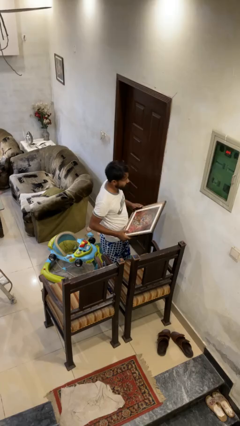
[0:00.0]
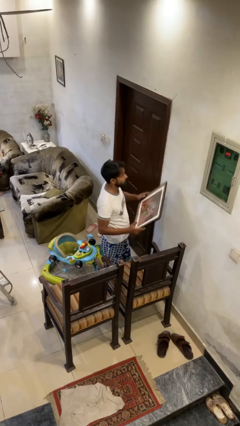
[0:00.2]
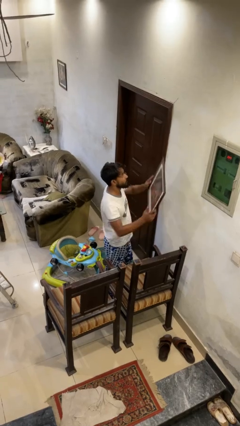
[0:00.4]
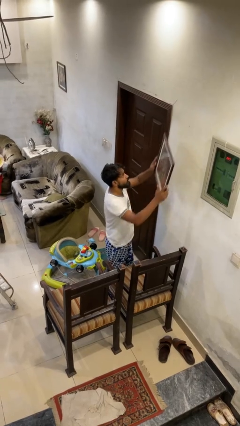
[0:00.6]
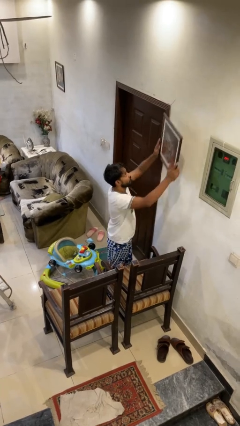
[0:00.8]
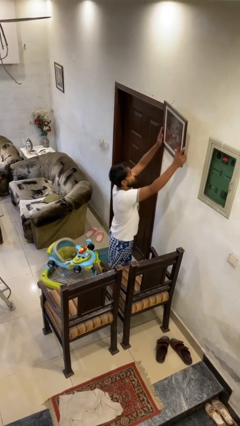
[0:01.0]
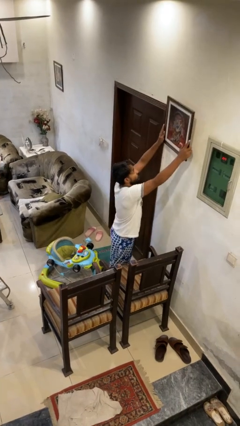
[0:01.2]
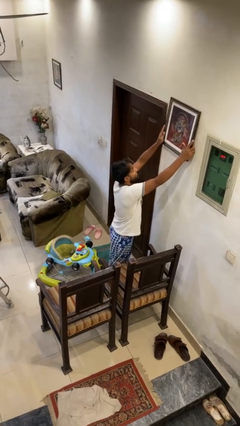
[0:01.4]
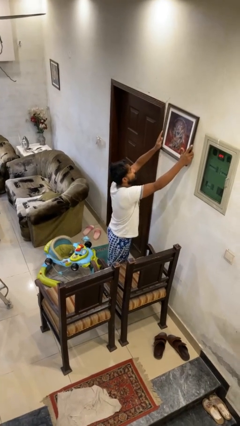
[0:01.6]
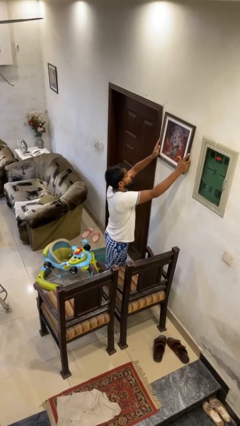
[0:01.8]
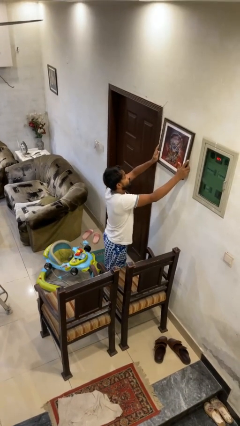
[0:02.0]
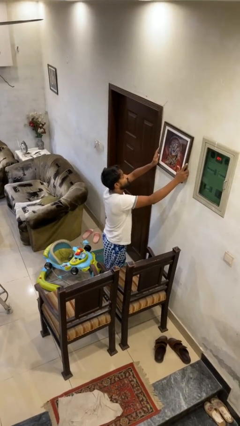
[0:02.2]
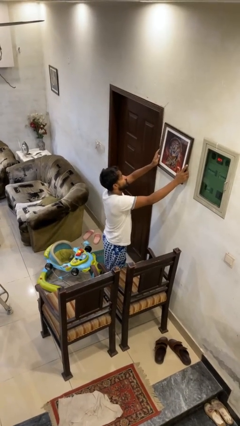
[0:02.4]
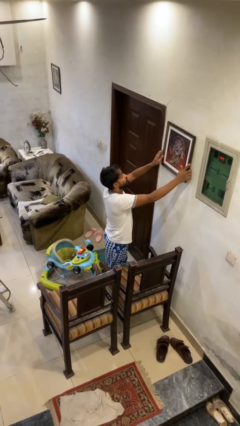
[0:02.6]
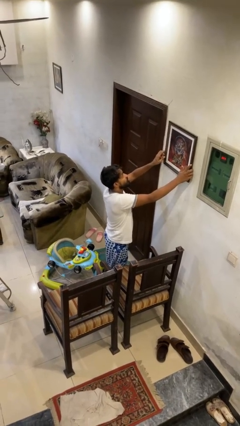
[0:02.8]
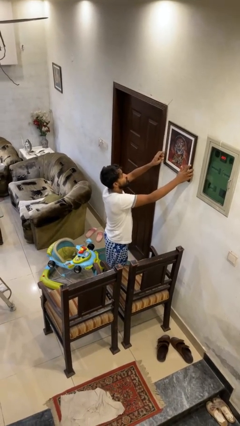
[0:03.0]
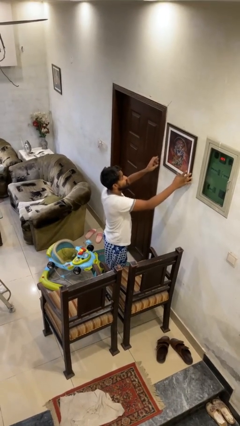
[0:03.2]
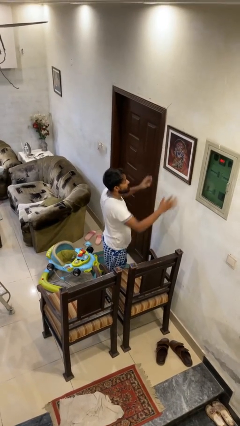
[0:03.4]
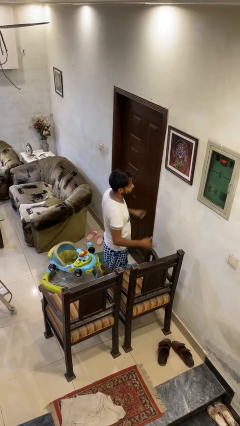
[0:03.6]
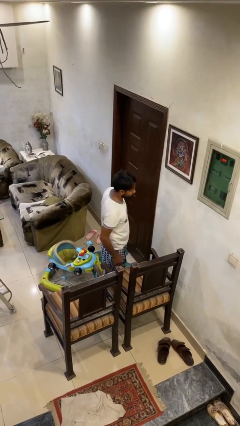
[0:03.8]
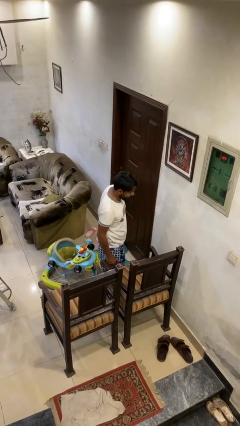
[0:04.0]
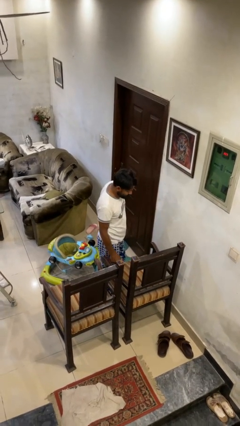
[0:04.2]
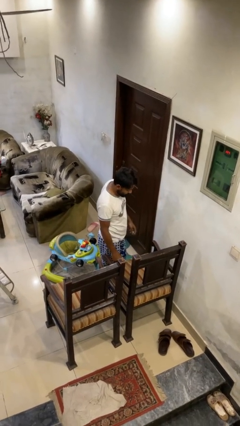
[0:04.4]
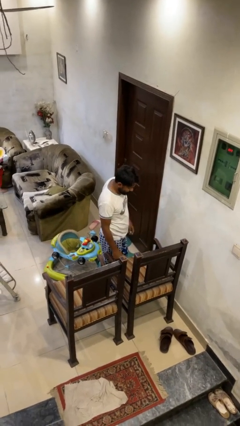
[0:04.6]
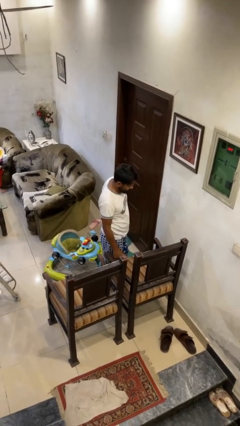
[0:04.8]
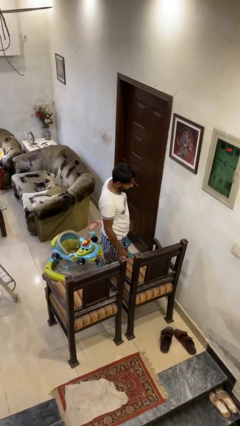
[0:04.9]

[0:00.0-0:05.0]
person puts up picture frame

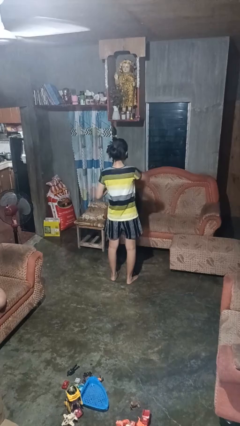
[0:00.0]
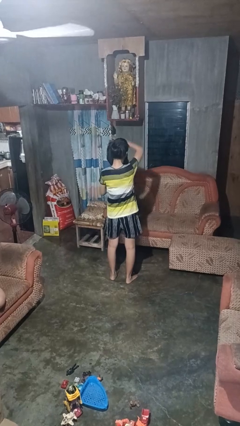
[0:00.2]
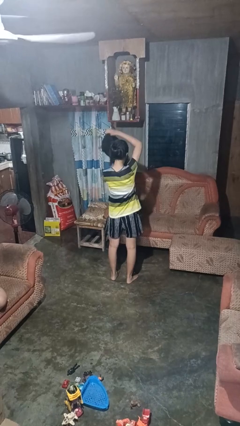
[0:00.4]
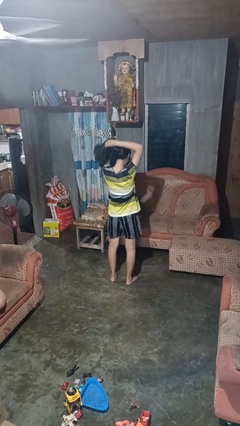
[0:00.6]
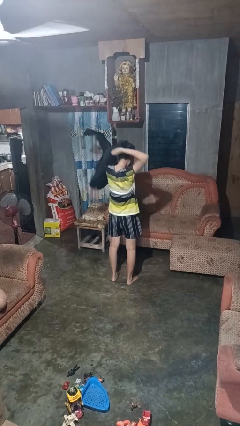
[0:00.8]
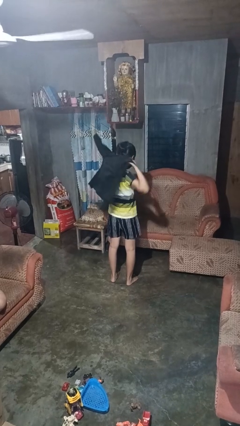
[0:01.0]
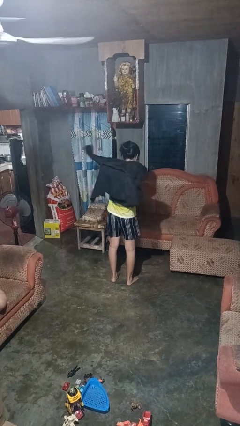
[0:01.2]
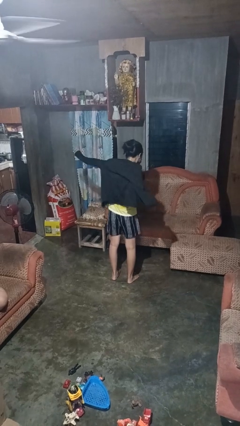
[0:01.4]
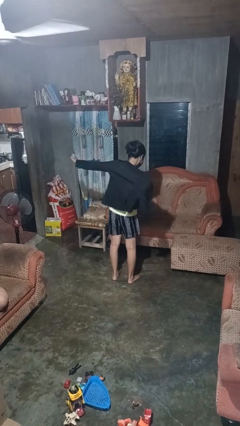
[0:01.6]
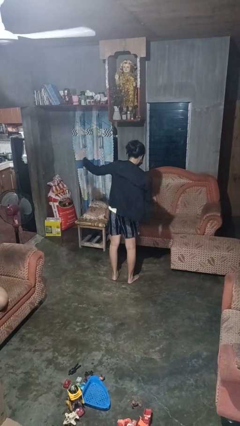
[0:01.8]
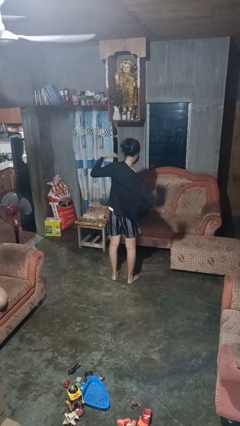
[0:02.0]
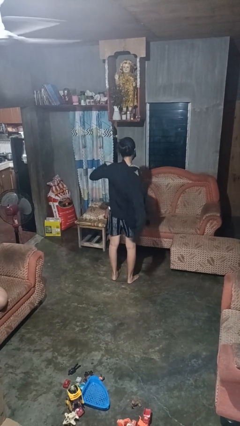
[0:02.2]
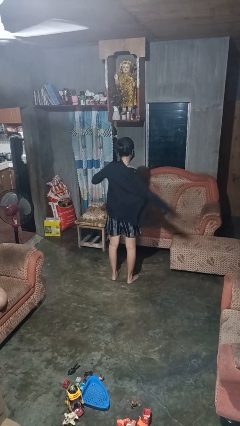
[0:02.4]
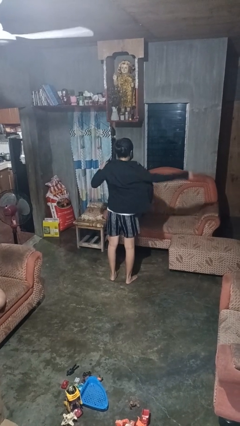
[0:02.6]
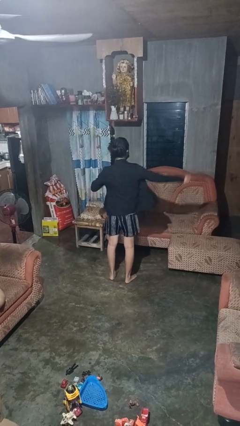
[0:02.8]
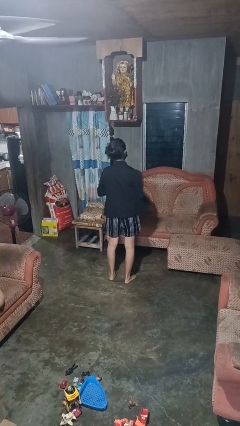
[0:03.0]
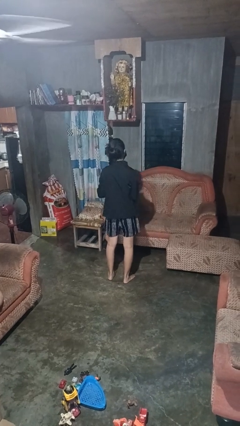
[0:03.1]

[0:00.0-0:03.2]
person puts on shirt

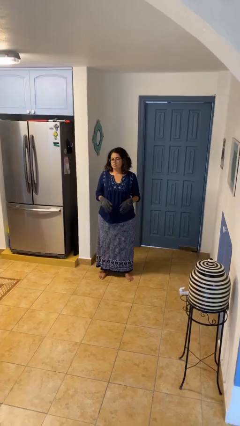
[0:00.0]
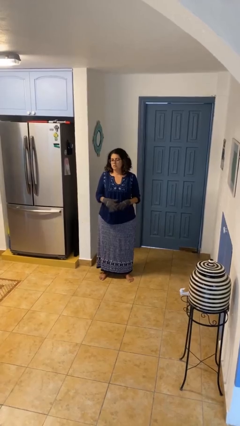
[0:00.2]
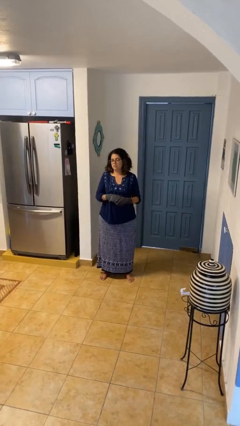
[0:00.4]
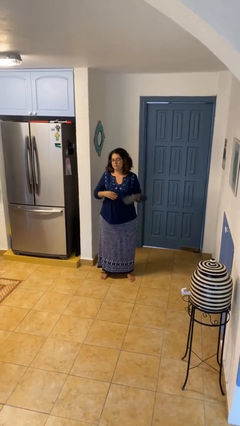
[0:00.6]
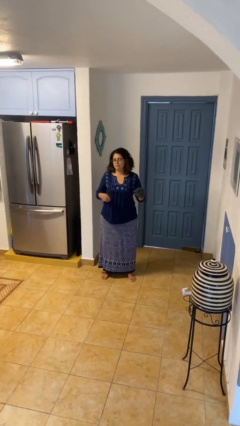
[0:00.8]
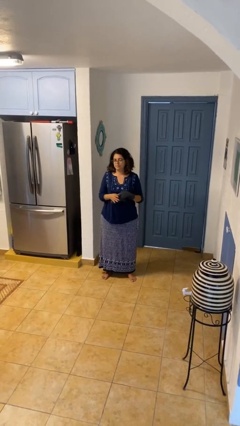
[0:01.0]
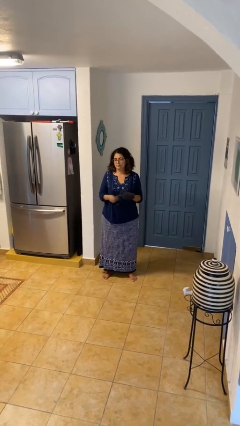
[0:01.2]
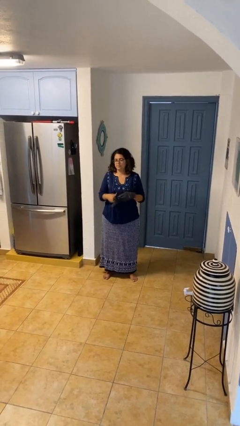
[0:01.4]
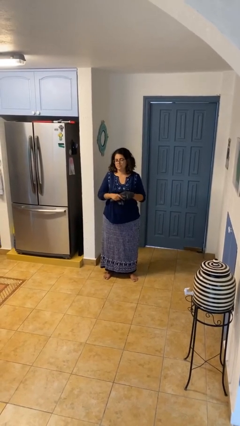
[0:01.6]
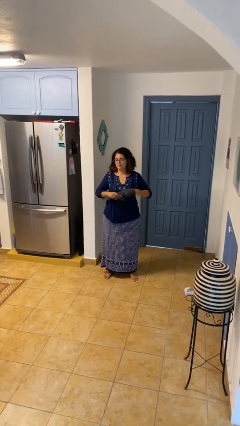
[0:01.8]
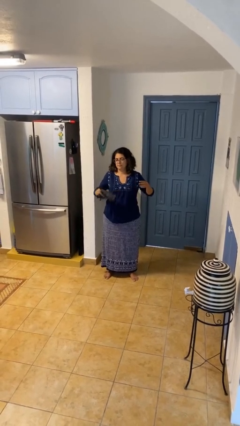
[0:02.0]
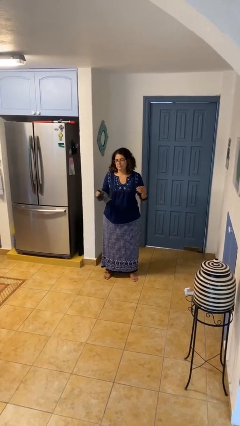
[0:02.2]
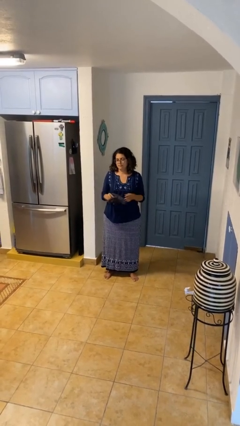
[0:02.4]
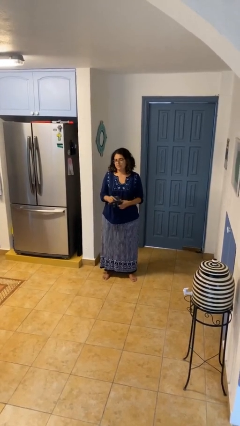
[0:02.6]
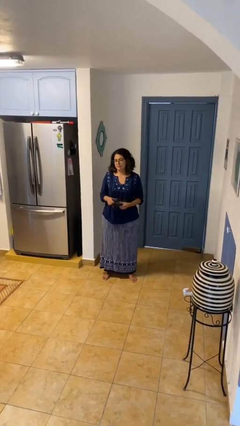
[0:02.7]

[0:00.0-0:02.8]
person takes off gloves

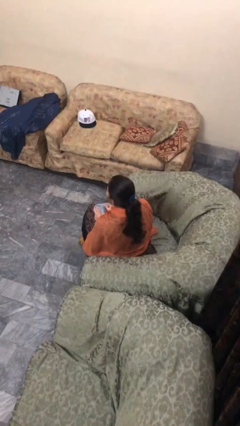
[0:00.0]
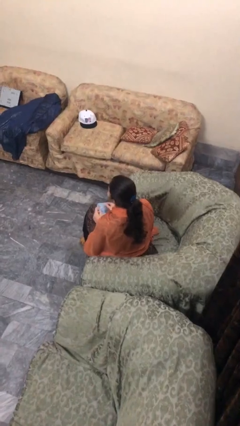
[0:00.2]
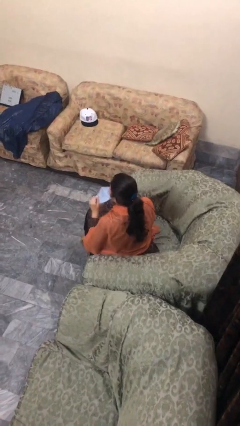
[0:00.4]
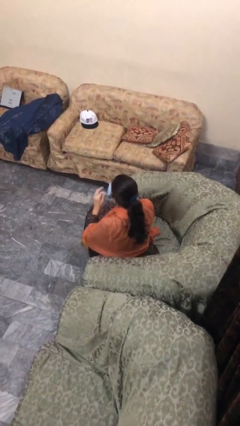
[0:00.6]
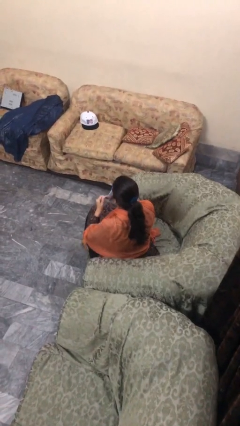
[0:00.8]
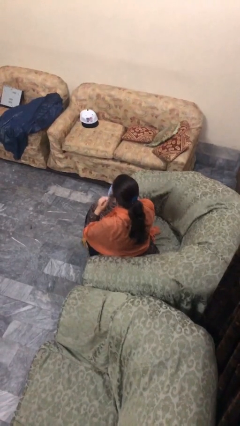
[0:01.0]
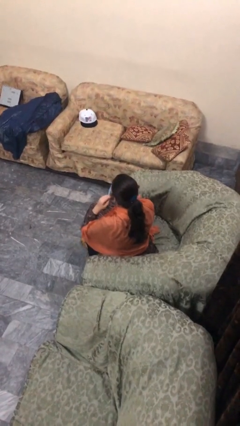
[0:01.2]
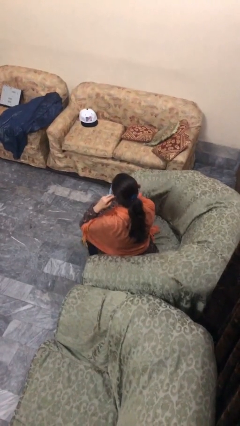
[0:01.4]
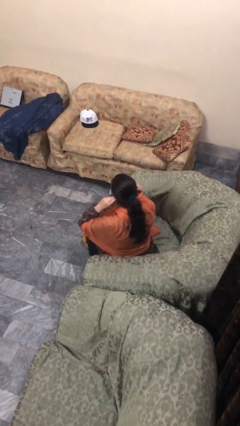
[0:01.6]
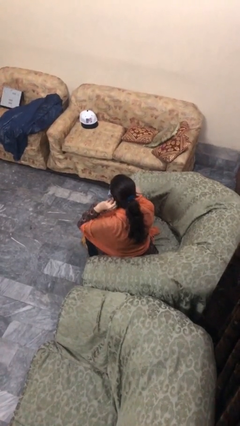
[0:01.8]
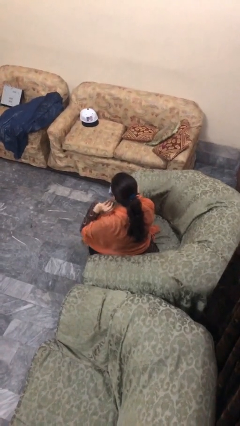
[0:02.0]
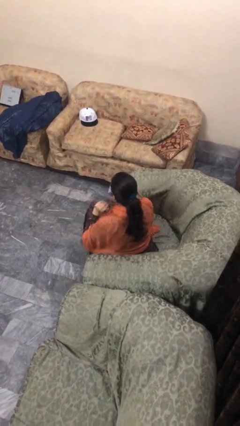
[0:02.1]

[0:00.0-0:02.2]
person puts on facemask

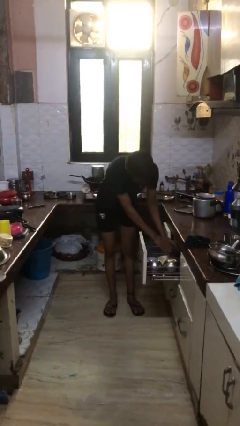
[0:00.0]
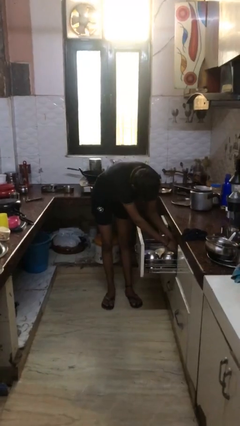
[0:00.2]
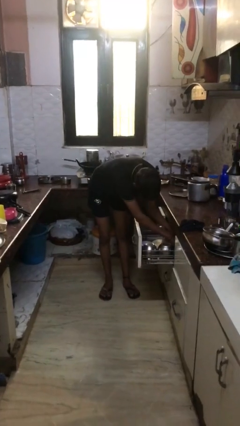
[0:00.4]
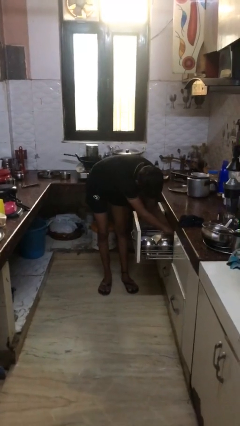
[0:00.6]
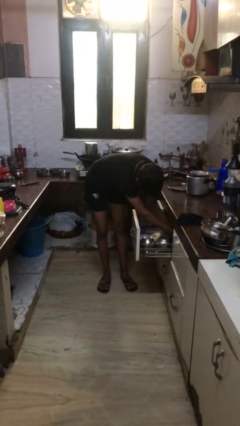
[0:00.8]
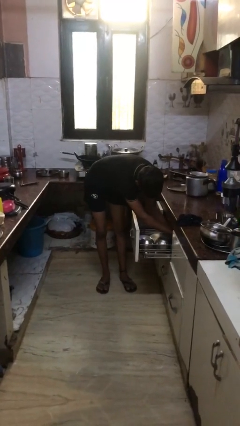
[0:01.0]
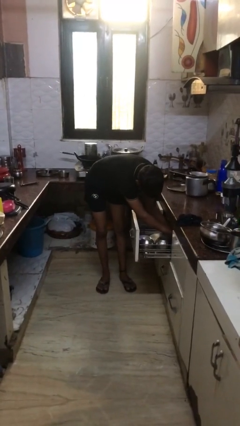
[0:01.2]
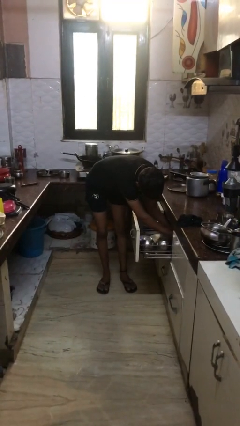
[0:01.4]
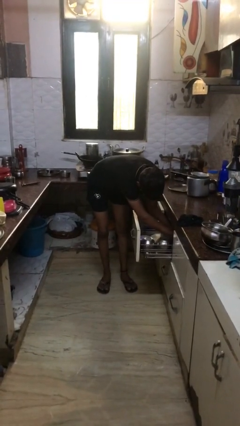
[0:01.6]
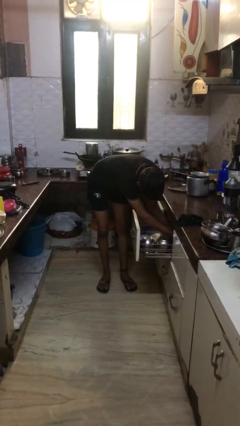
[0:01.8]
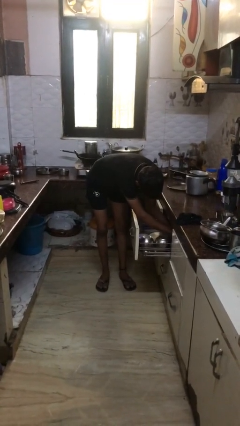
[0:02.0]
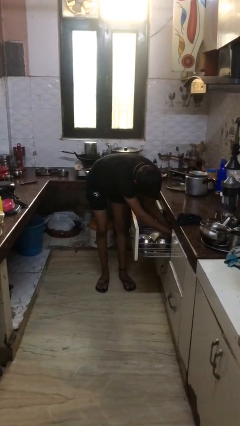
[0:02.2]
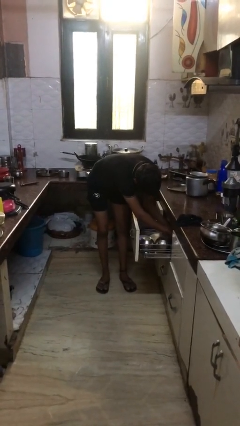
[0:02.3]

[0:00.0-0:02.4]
person searches in kitchen drawer

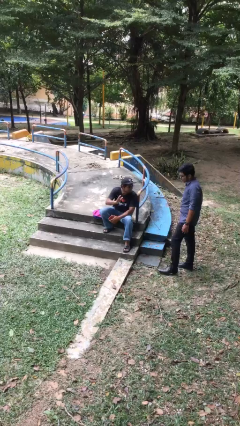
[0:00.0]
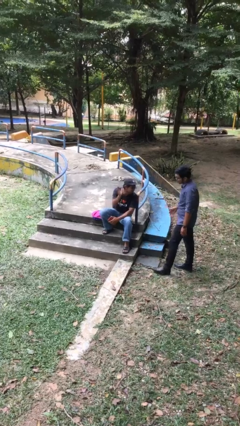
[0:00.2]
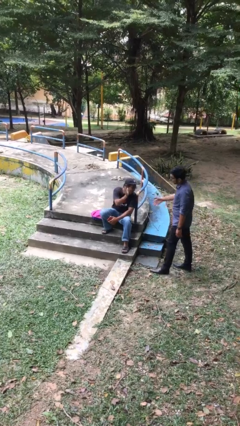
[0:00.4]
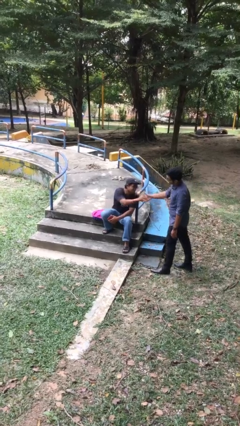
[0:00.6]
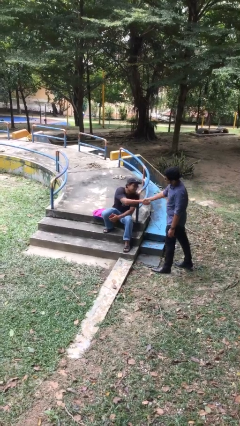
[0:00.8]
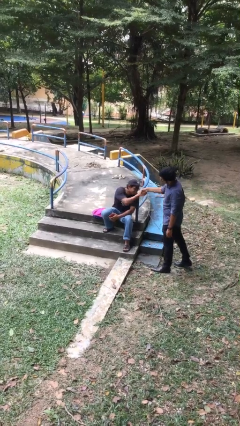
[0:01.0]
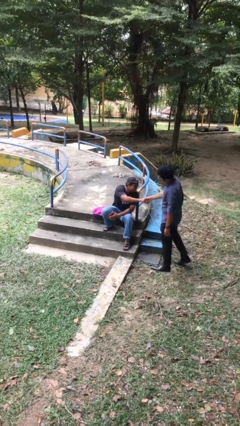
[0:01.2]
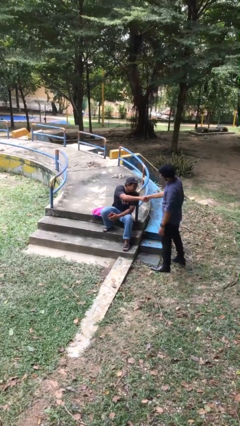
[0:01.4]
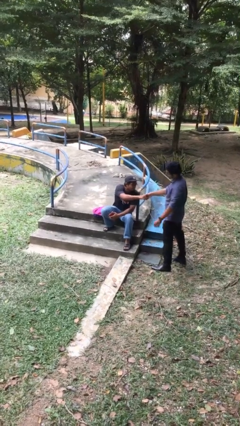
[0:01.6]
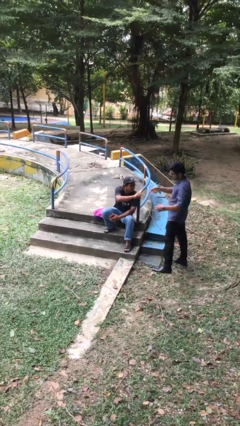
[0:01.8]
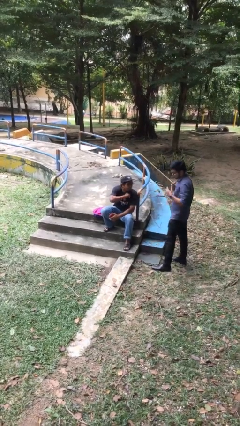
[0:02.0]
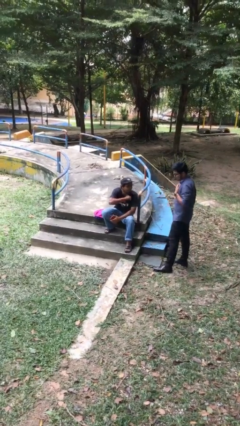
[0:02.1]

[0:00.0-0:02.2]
person shakes hand
